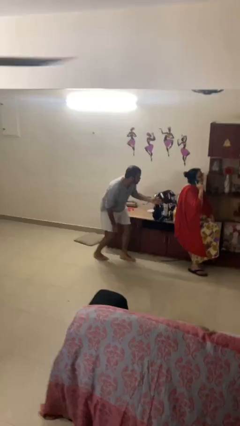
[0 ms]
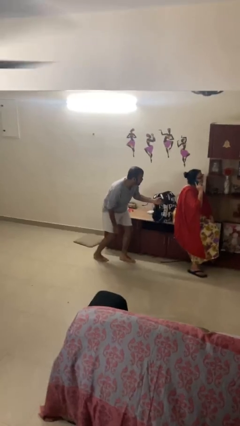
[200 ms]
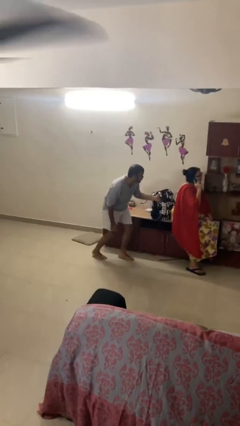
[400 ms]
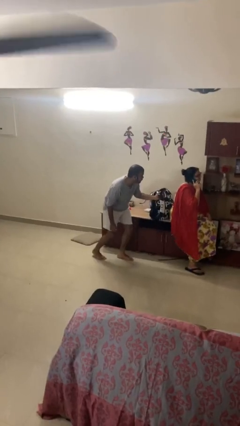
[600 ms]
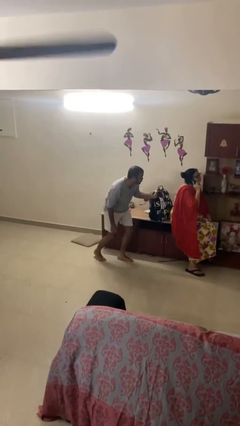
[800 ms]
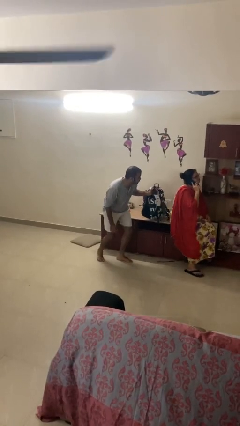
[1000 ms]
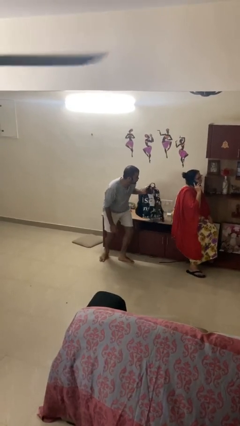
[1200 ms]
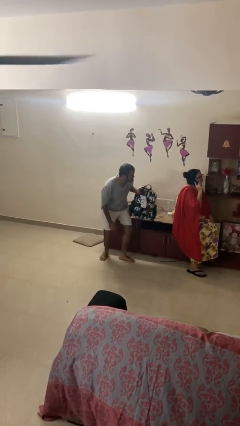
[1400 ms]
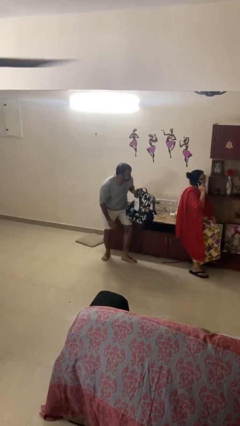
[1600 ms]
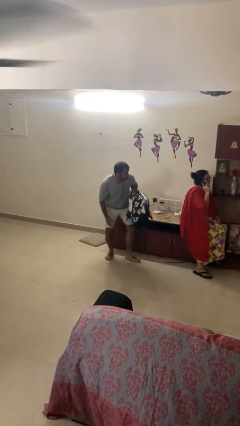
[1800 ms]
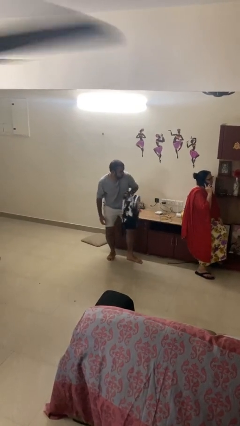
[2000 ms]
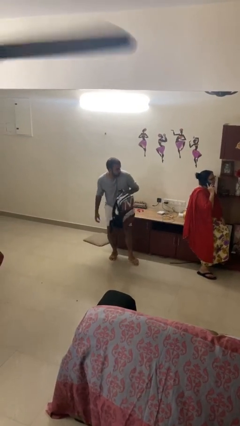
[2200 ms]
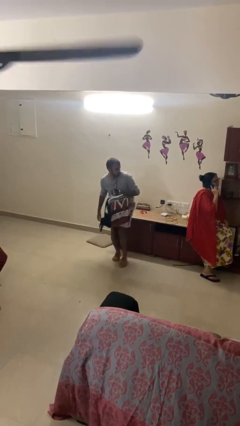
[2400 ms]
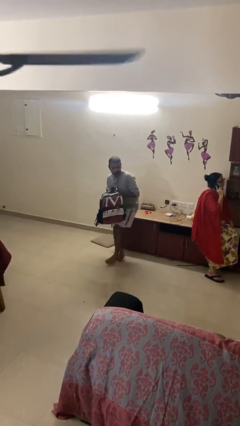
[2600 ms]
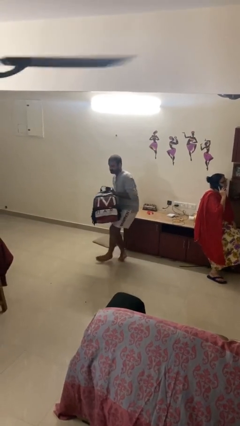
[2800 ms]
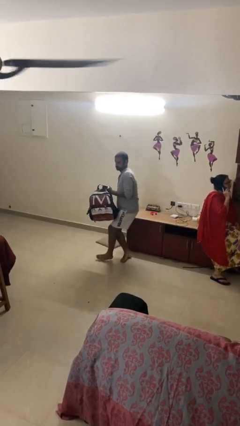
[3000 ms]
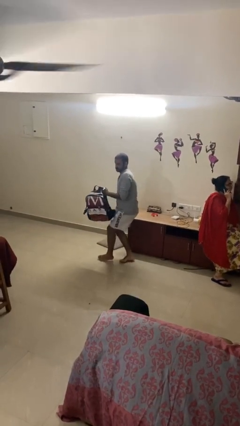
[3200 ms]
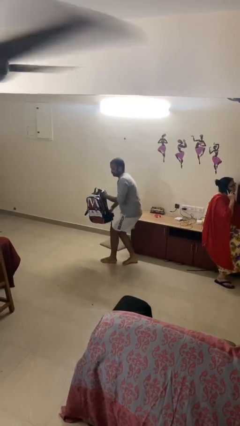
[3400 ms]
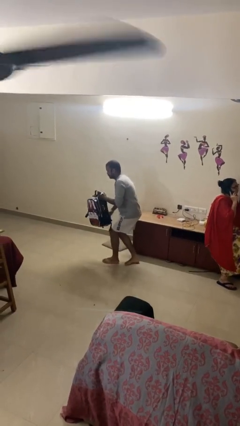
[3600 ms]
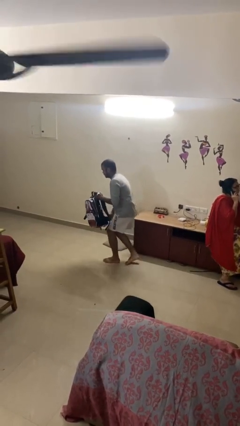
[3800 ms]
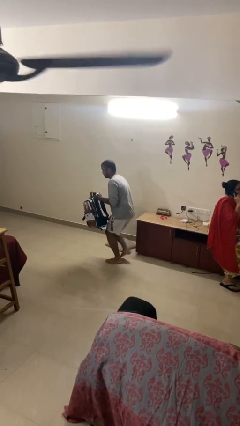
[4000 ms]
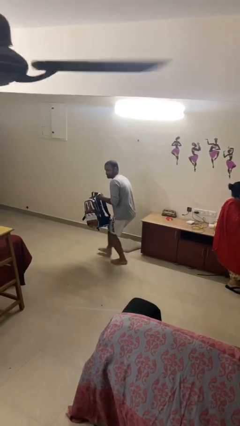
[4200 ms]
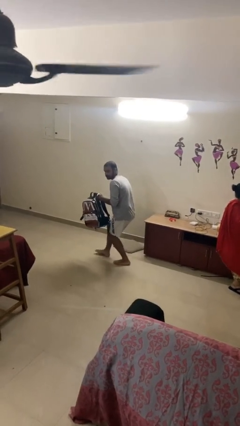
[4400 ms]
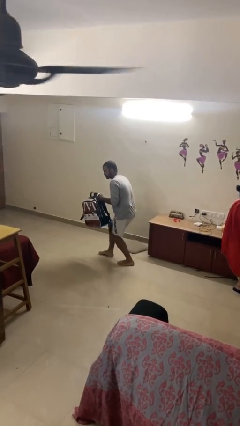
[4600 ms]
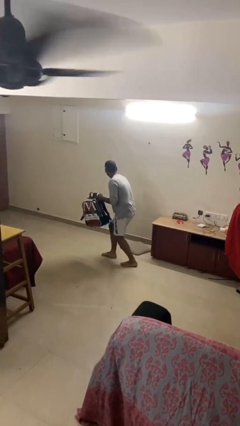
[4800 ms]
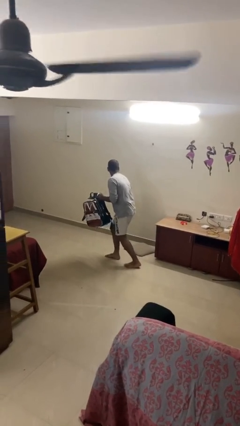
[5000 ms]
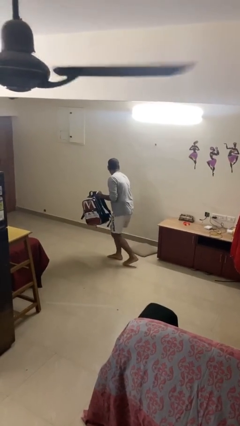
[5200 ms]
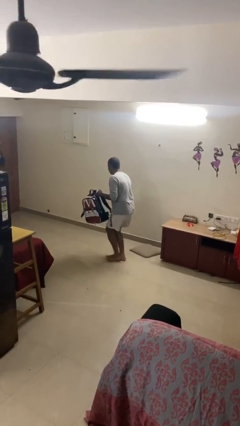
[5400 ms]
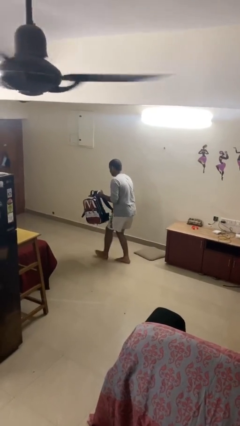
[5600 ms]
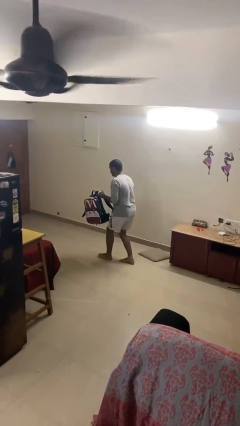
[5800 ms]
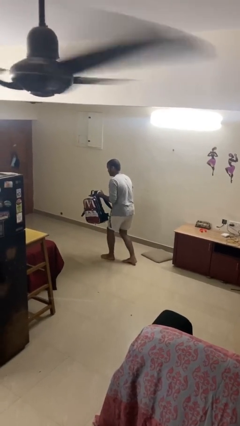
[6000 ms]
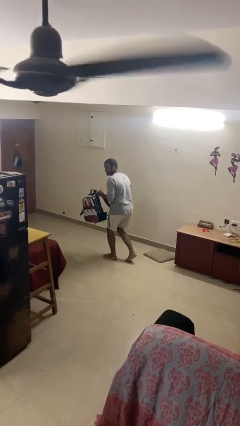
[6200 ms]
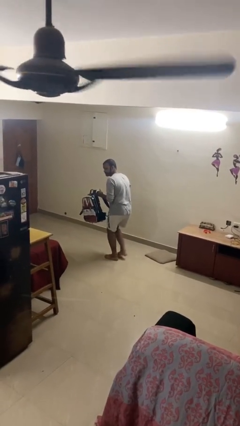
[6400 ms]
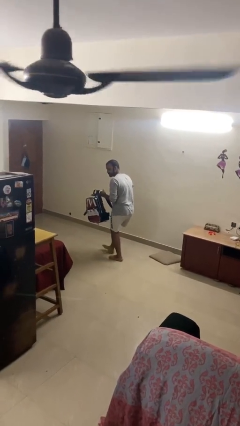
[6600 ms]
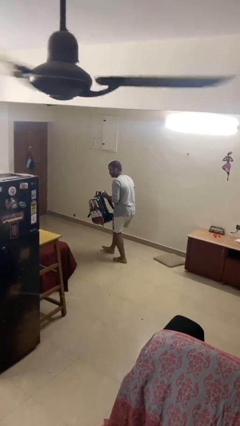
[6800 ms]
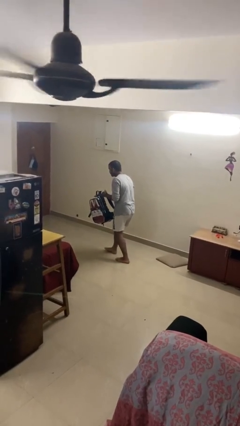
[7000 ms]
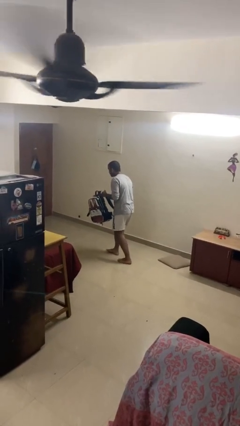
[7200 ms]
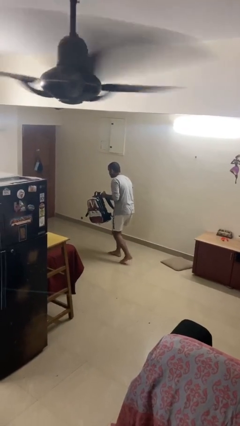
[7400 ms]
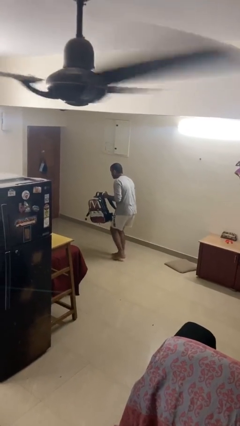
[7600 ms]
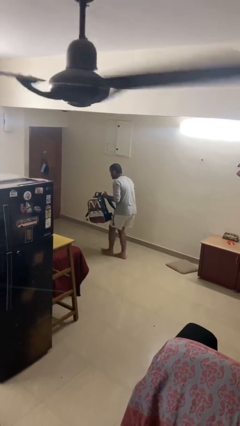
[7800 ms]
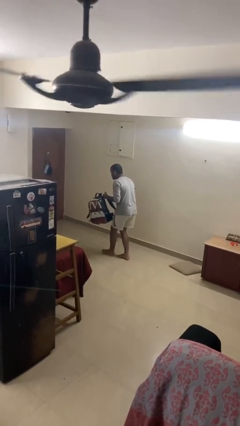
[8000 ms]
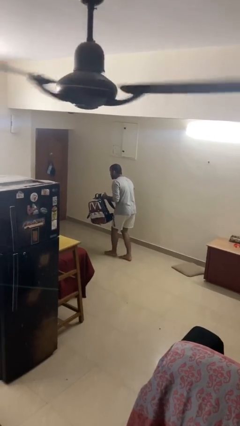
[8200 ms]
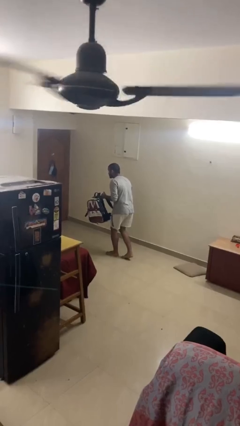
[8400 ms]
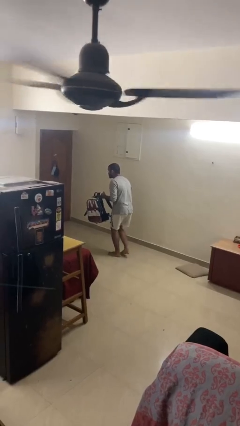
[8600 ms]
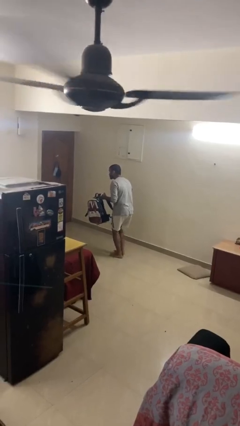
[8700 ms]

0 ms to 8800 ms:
person steals object from person

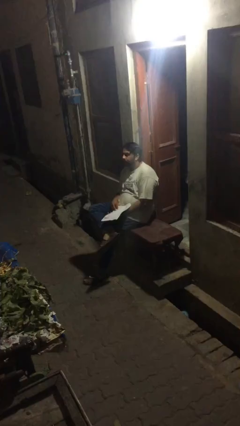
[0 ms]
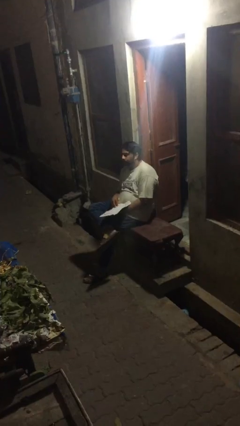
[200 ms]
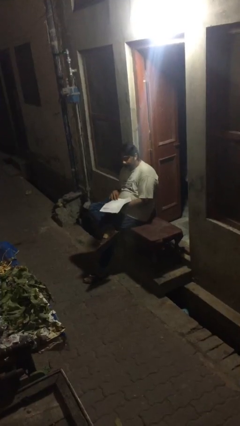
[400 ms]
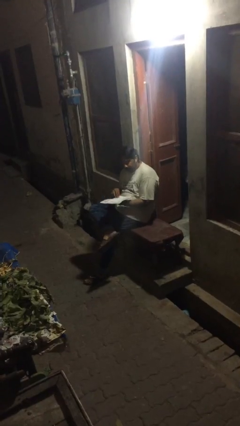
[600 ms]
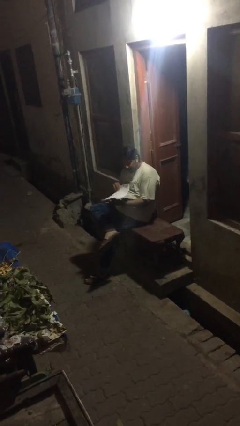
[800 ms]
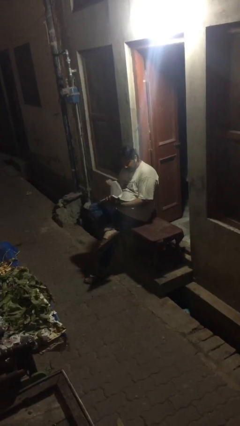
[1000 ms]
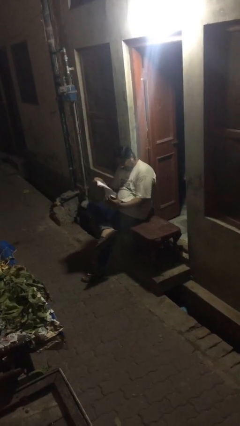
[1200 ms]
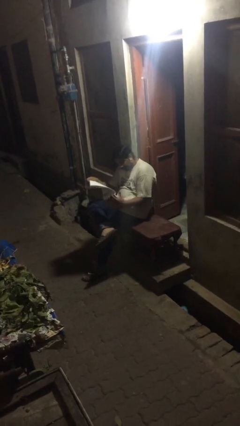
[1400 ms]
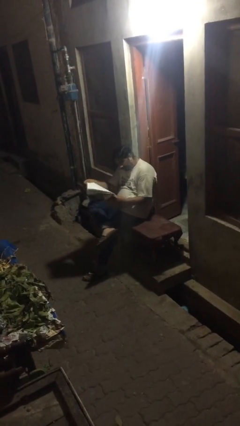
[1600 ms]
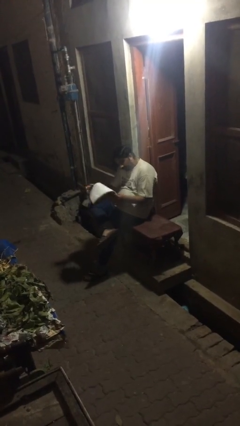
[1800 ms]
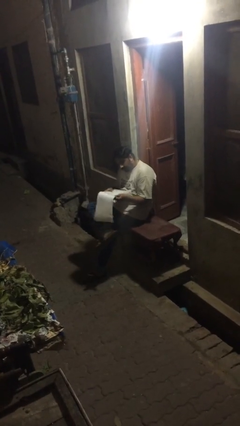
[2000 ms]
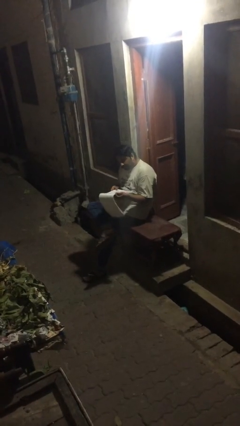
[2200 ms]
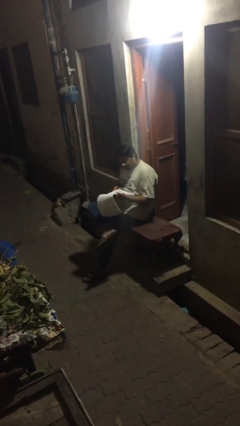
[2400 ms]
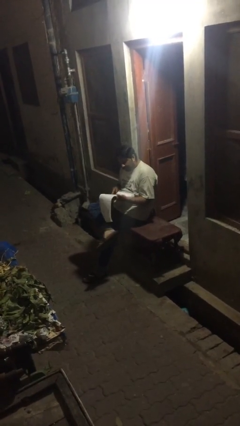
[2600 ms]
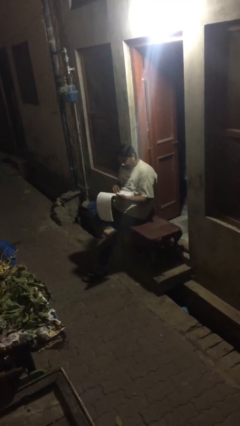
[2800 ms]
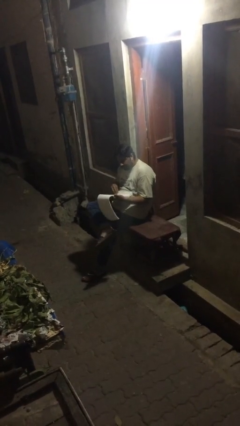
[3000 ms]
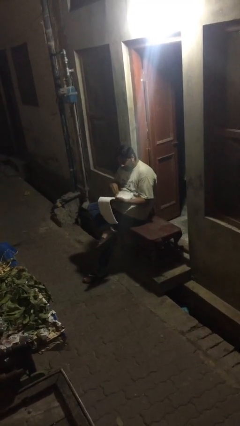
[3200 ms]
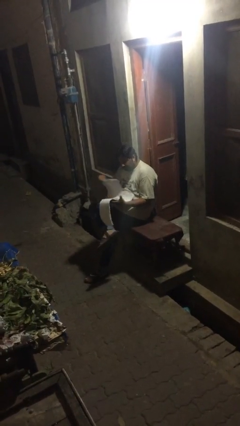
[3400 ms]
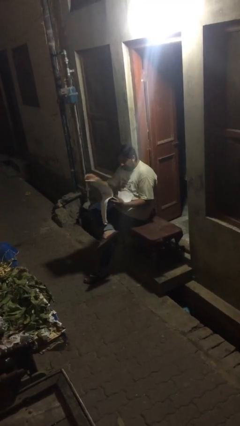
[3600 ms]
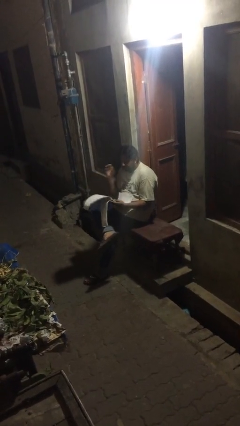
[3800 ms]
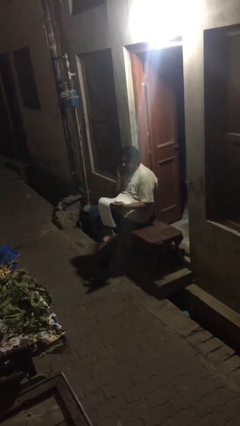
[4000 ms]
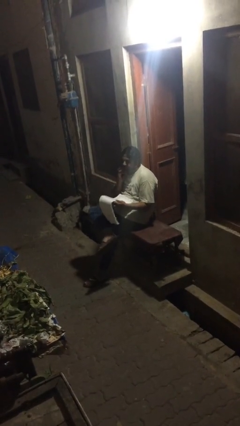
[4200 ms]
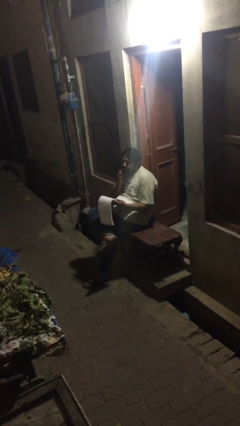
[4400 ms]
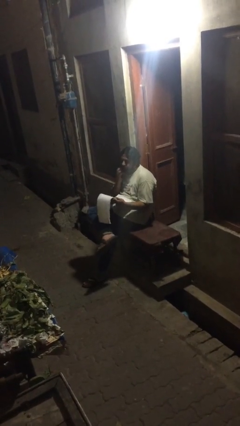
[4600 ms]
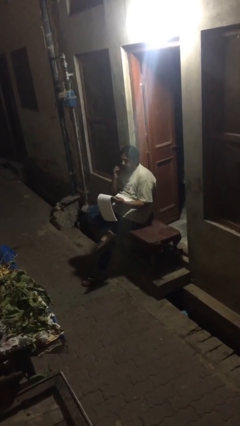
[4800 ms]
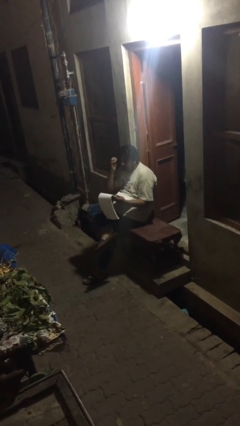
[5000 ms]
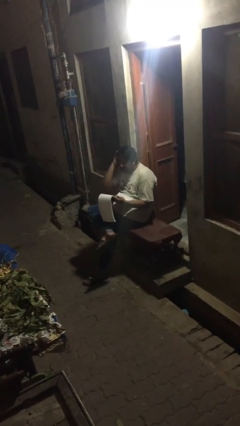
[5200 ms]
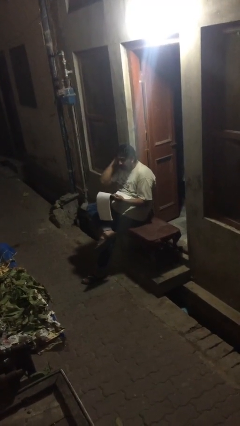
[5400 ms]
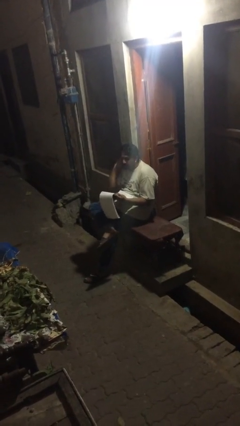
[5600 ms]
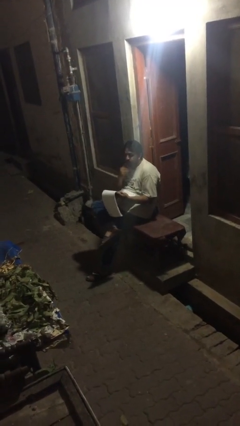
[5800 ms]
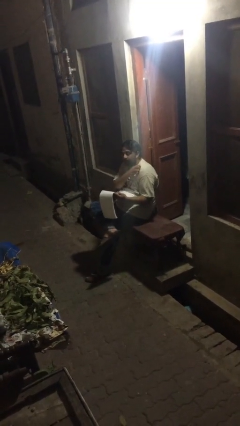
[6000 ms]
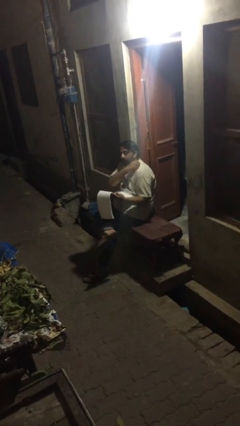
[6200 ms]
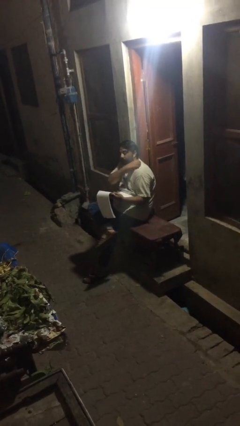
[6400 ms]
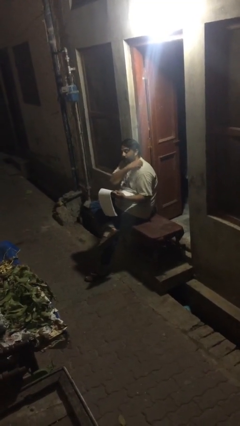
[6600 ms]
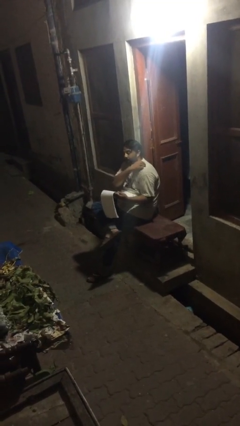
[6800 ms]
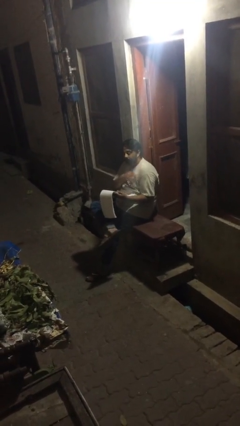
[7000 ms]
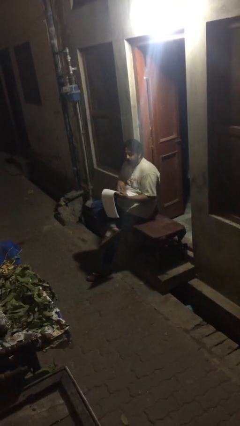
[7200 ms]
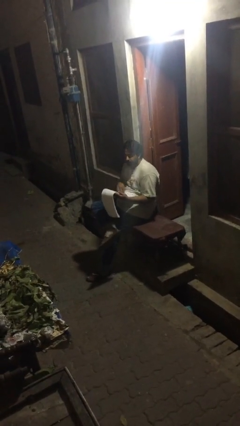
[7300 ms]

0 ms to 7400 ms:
person reads document

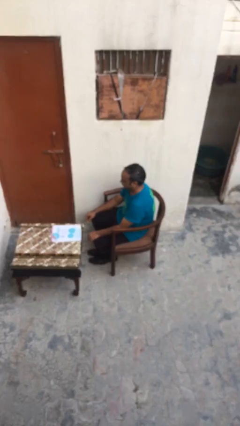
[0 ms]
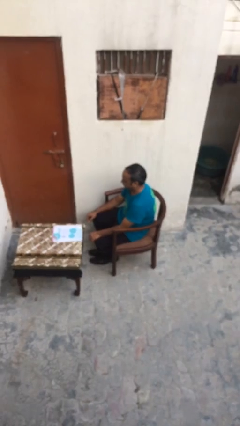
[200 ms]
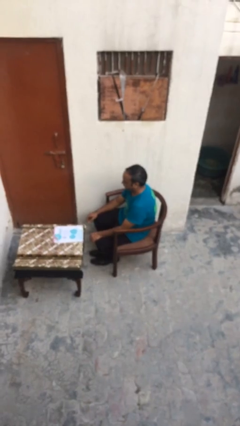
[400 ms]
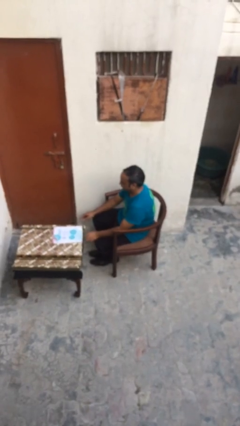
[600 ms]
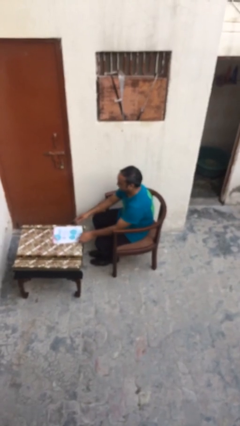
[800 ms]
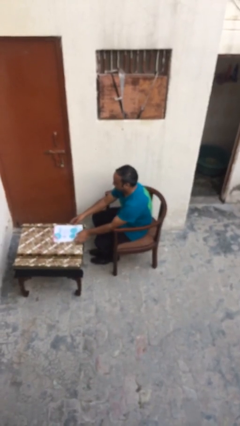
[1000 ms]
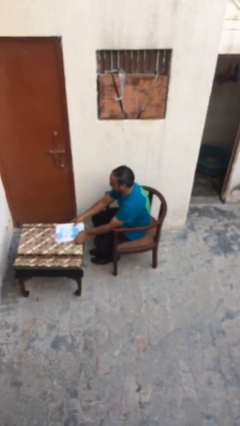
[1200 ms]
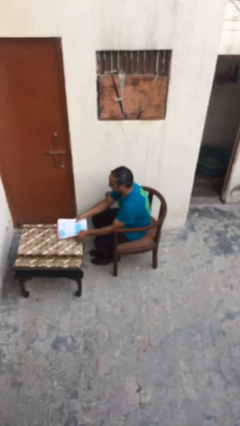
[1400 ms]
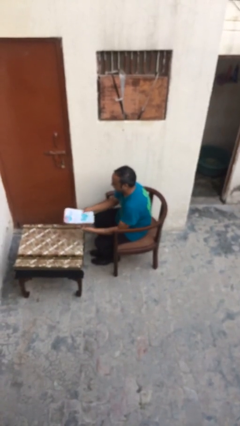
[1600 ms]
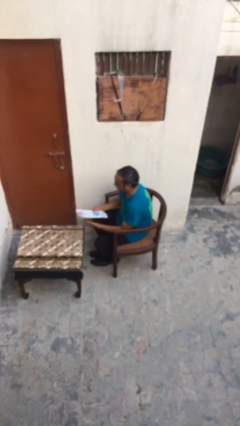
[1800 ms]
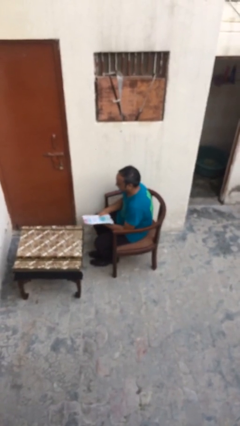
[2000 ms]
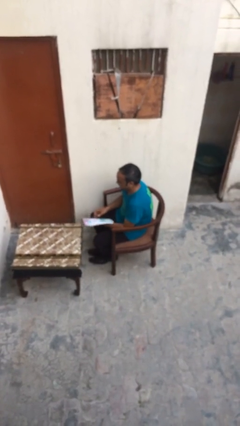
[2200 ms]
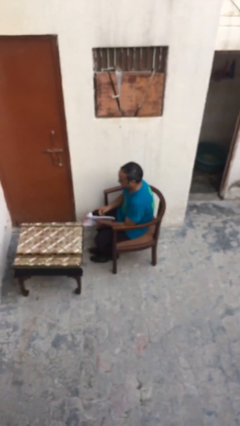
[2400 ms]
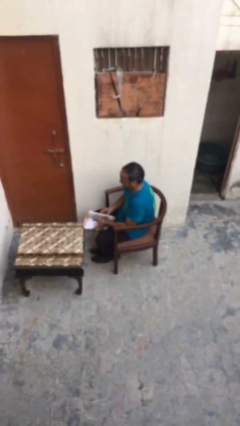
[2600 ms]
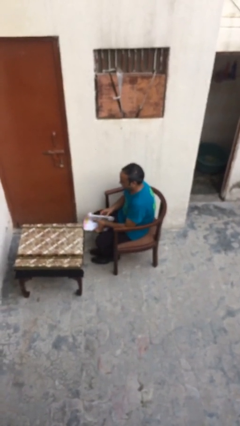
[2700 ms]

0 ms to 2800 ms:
person picks up object from table
